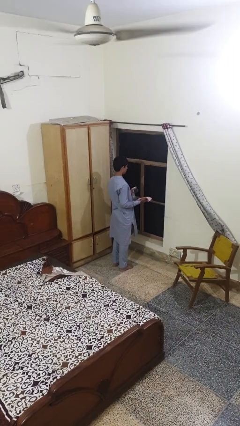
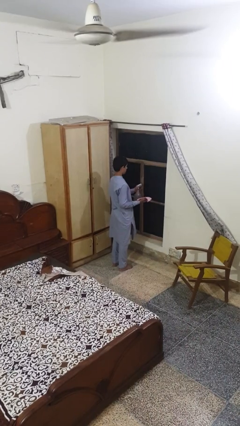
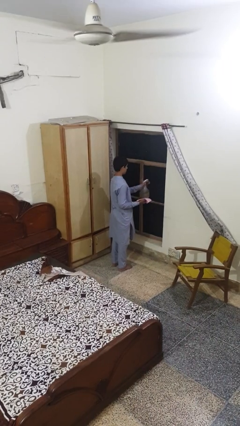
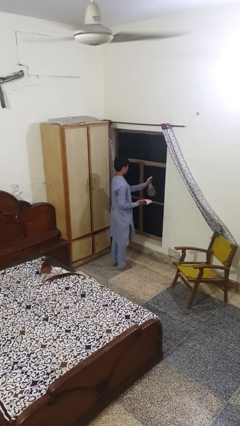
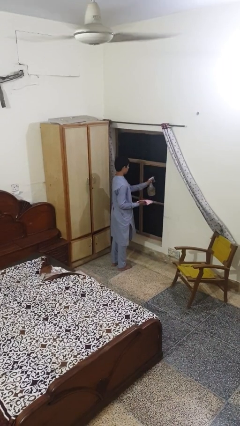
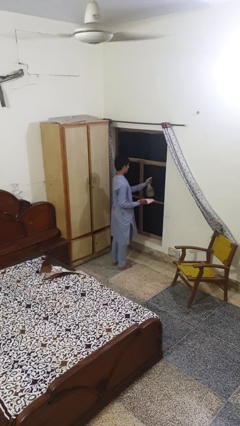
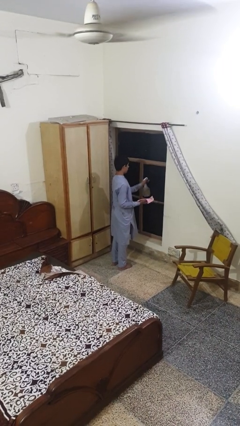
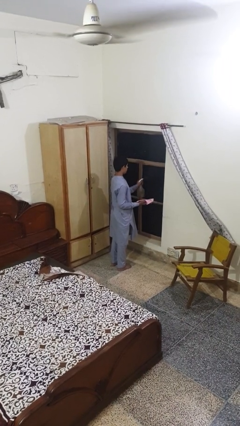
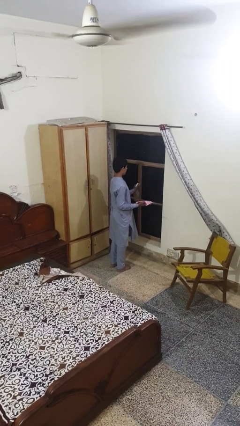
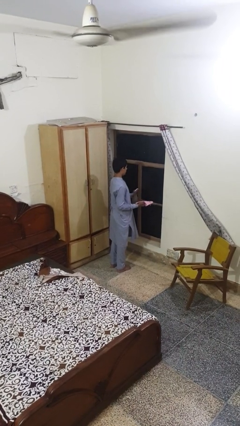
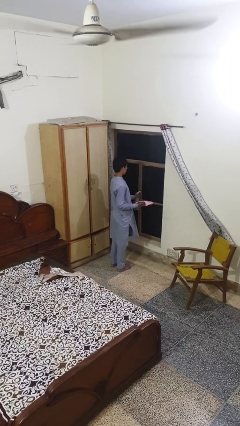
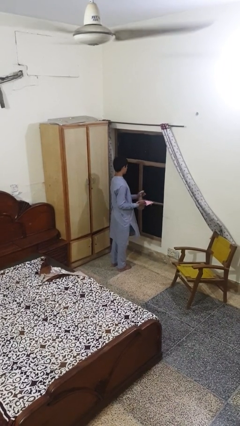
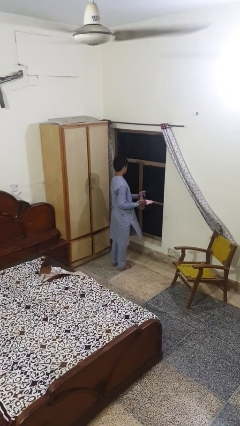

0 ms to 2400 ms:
person sprays from bottle

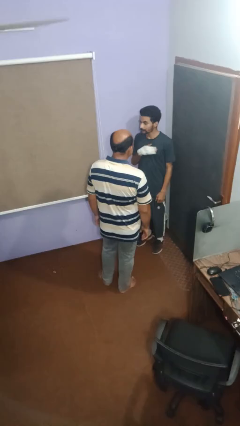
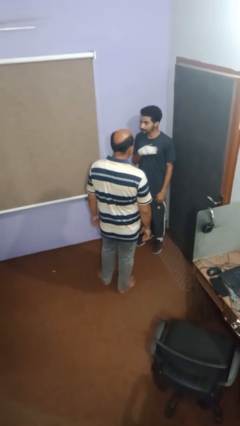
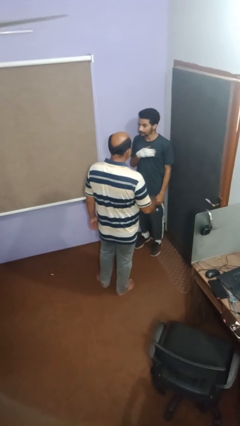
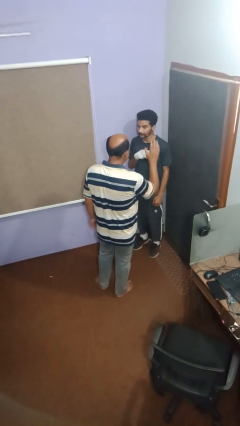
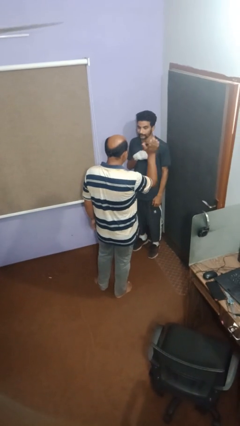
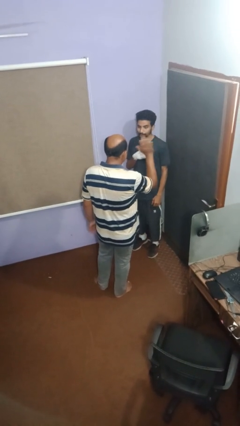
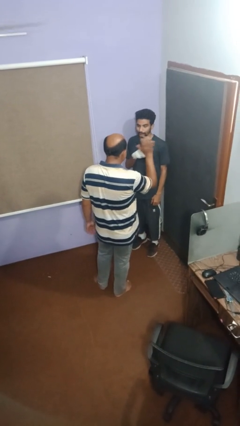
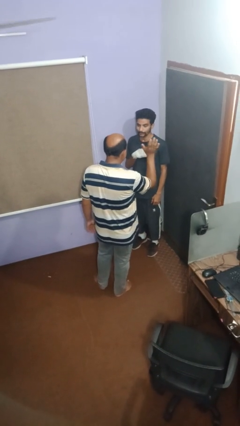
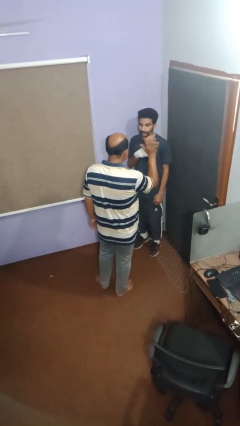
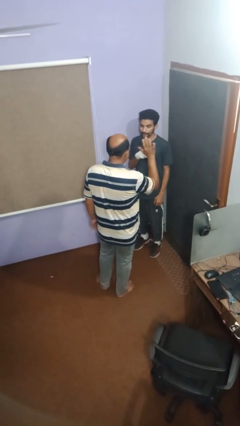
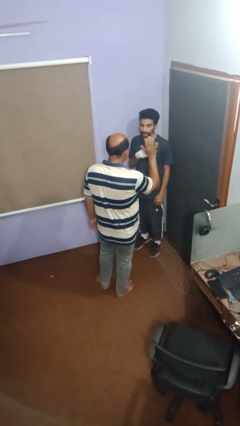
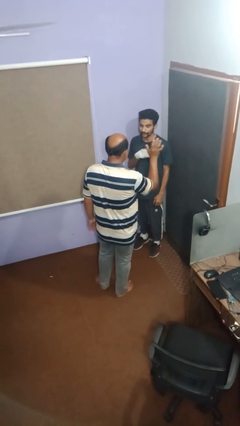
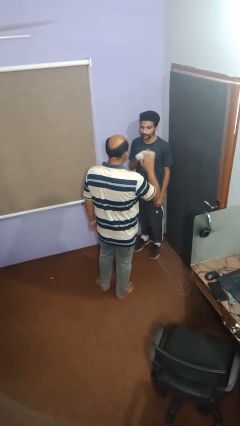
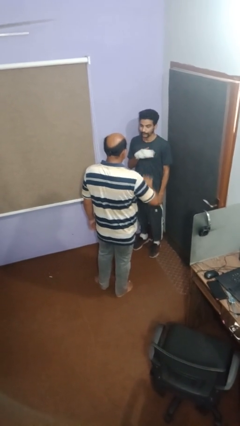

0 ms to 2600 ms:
person waves at person

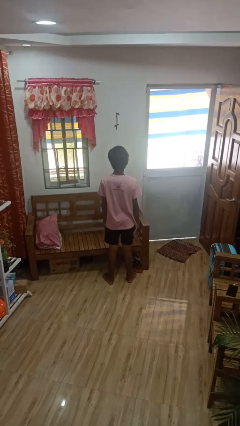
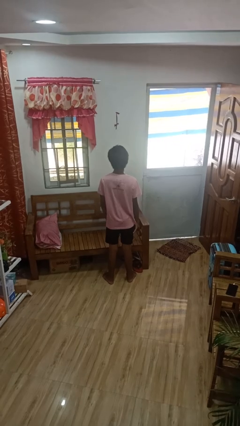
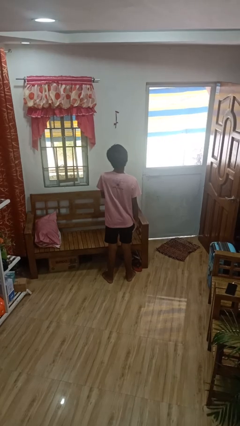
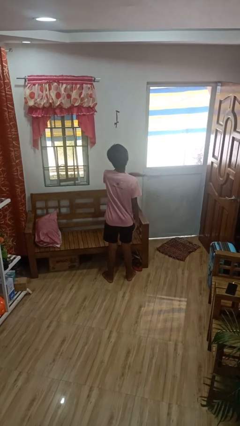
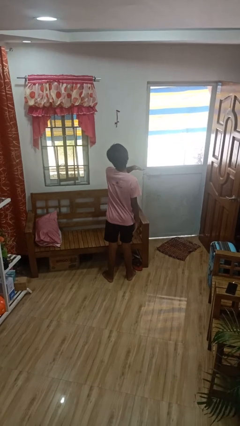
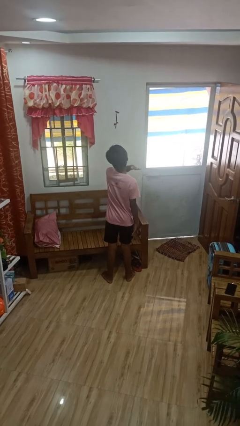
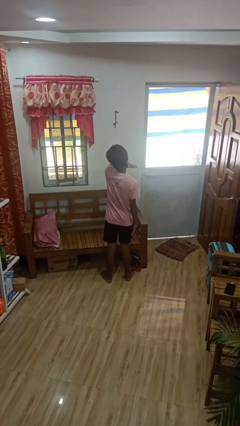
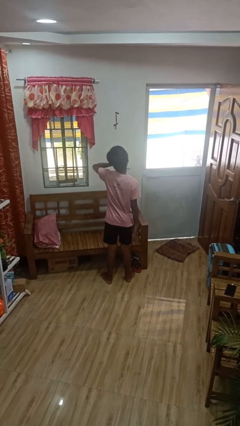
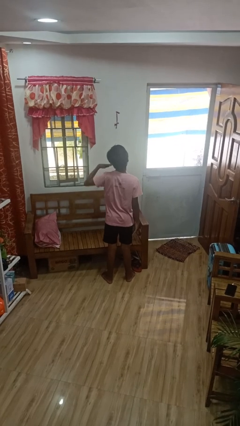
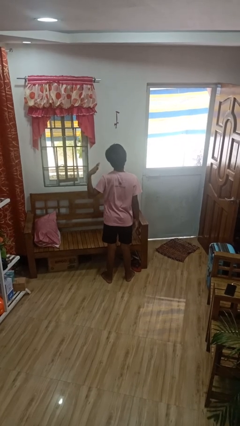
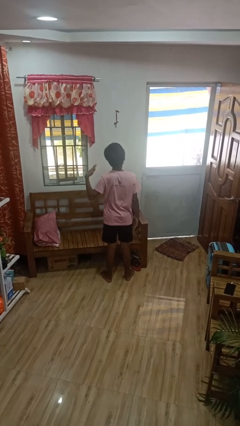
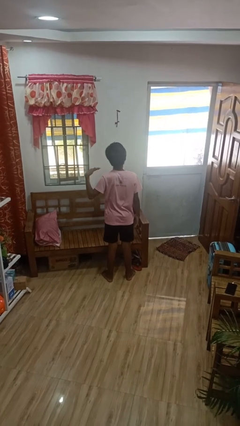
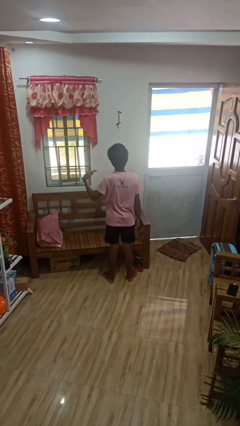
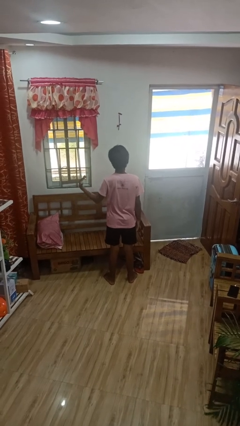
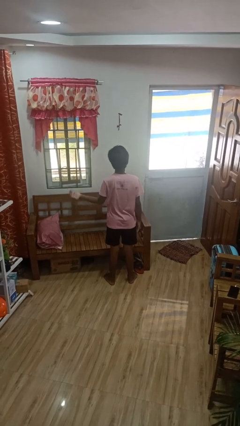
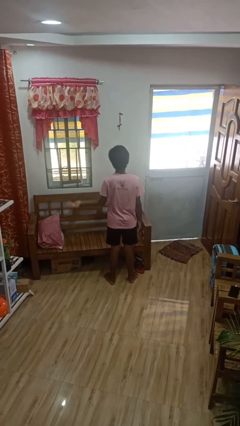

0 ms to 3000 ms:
person gestures cut

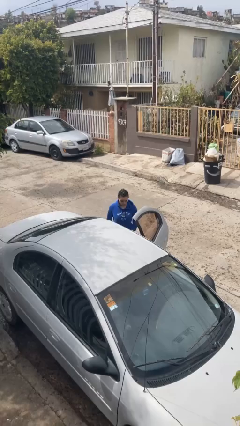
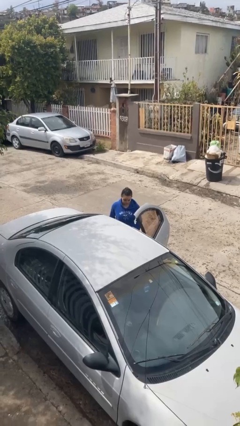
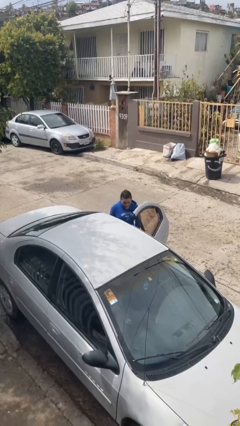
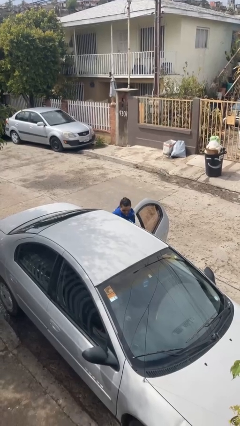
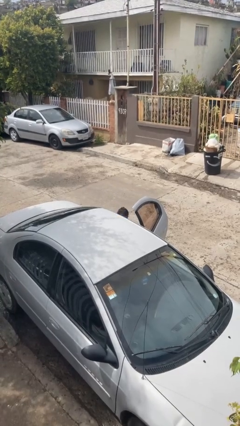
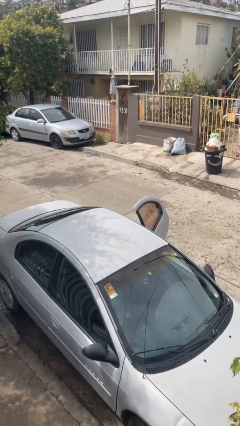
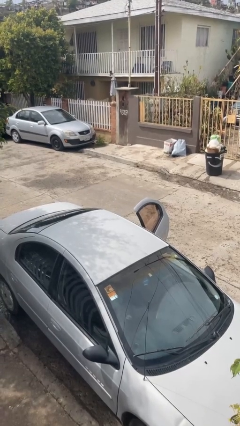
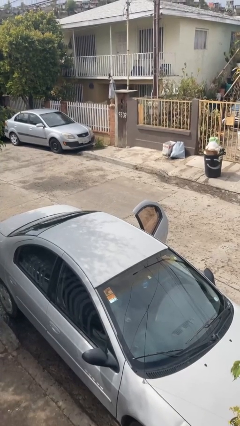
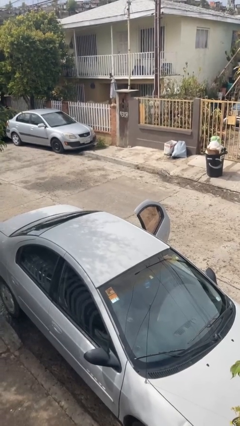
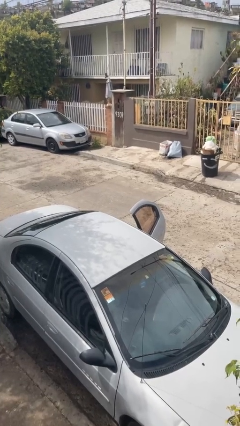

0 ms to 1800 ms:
person enters car

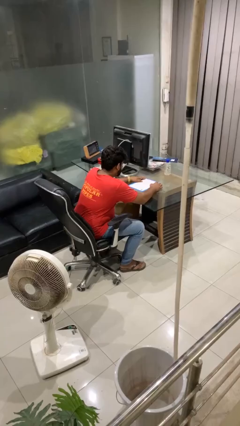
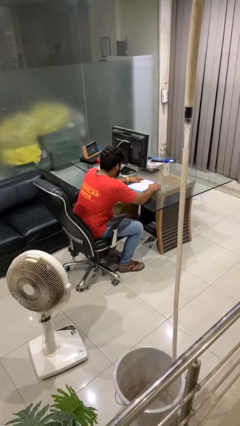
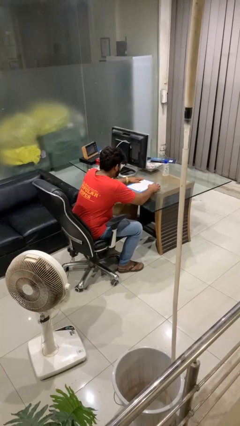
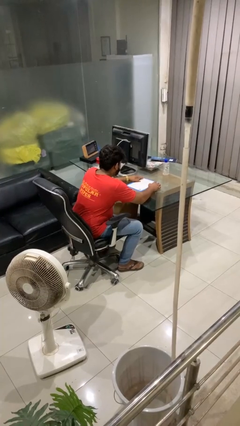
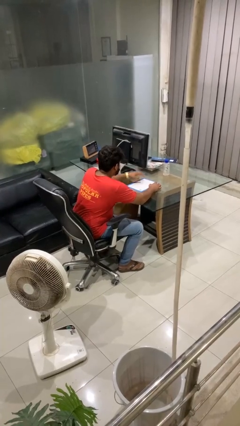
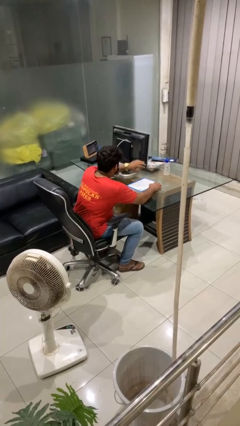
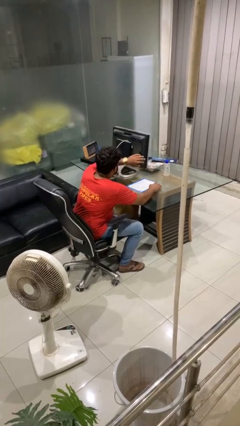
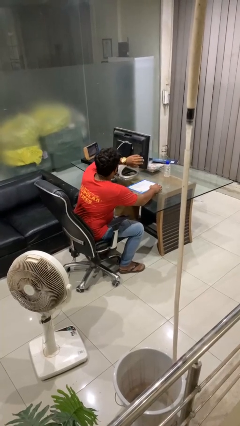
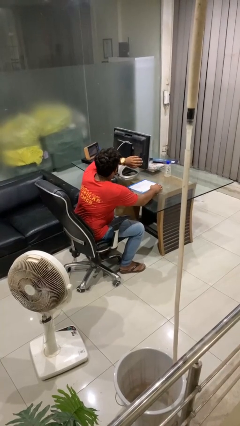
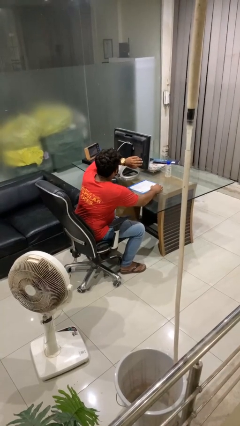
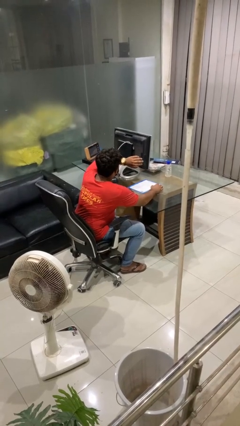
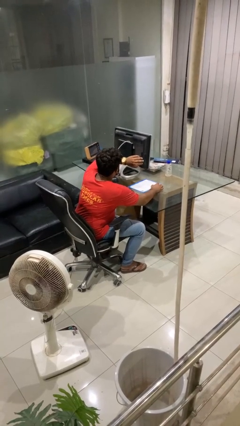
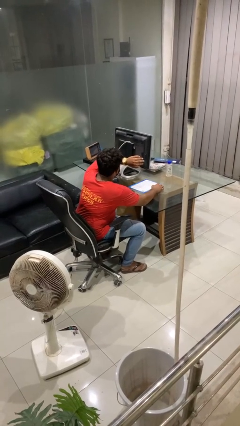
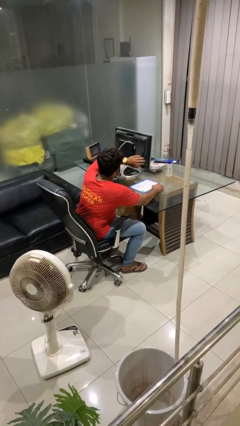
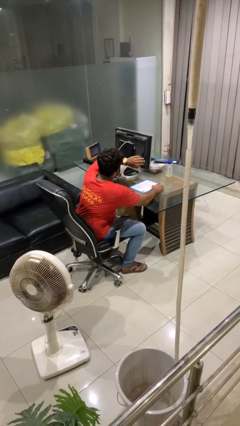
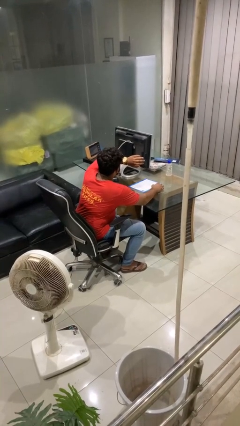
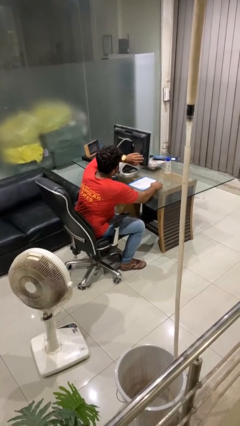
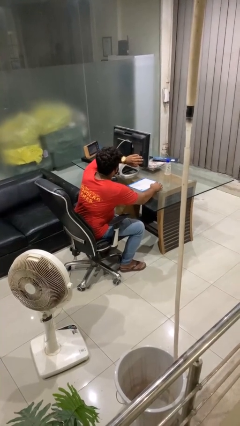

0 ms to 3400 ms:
person looks at wristwatch

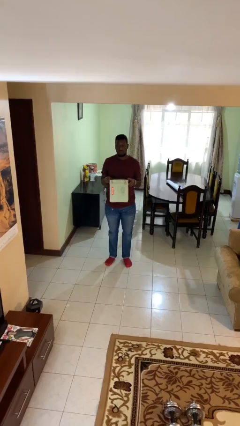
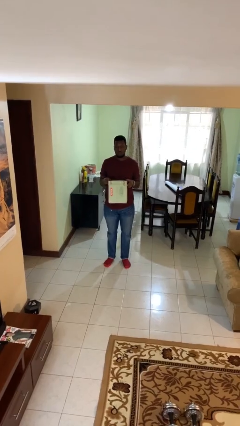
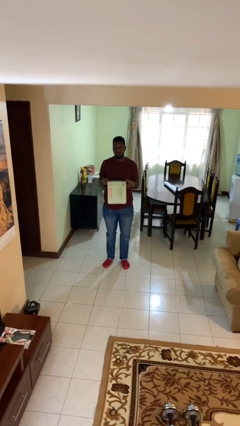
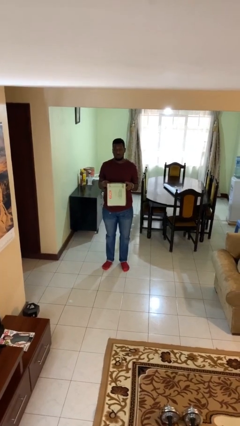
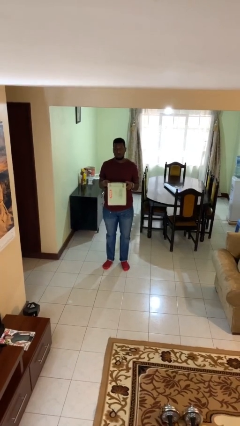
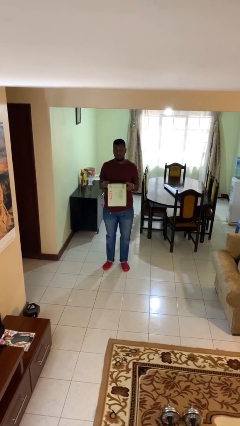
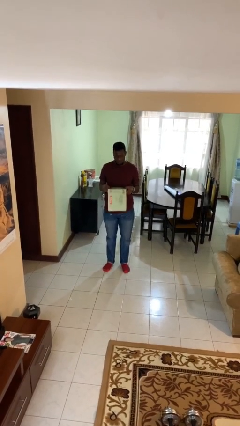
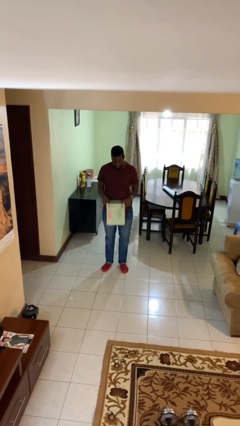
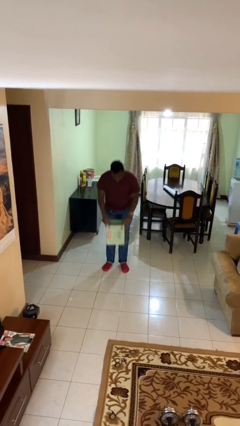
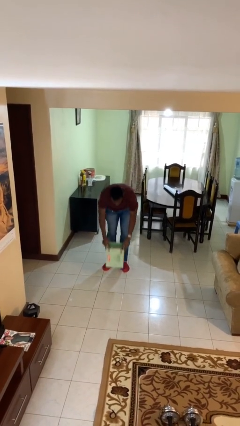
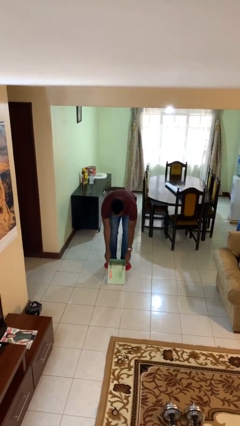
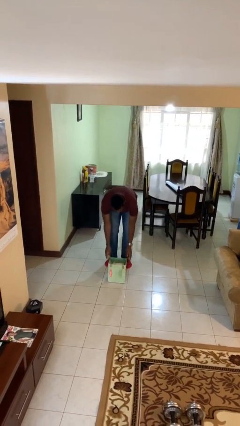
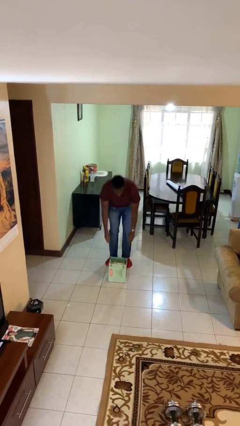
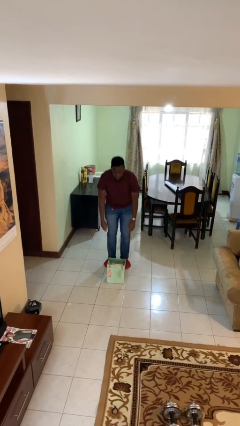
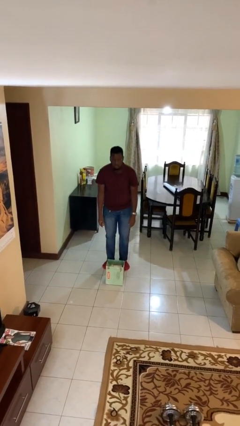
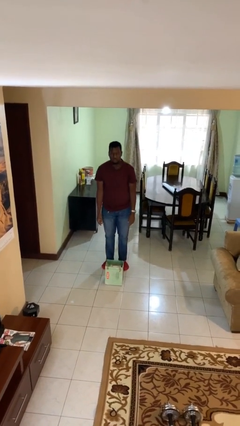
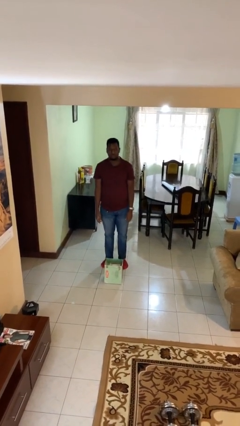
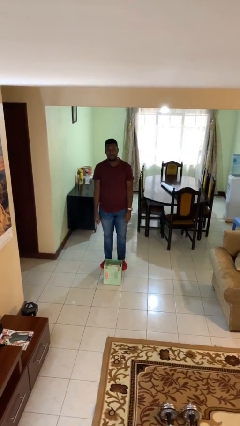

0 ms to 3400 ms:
person puts down object on floor

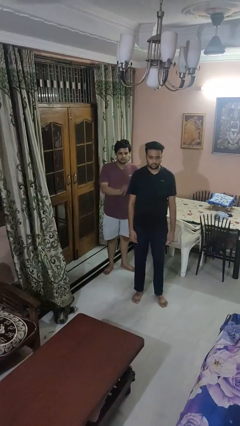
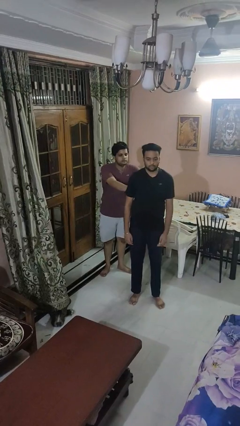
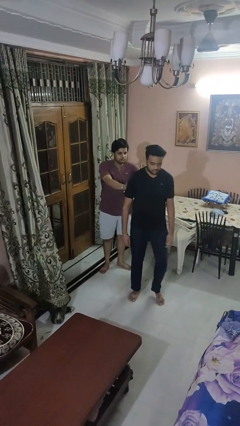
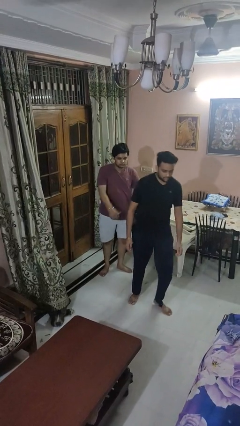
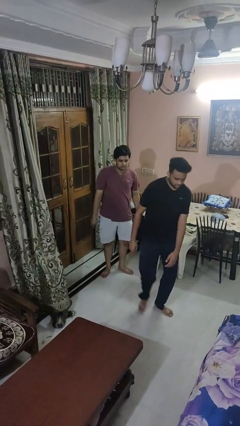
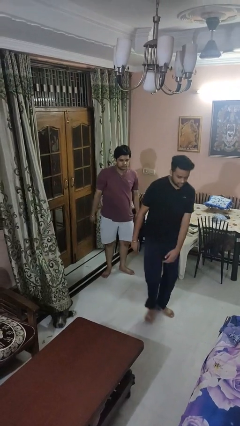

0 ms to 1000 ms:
person shoves person
